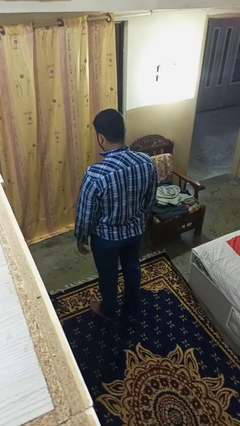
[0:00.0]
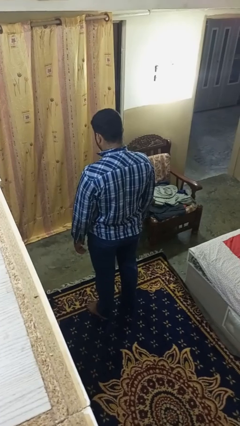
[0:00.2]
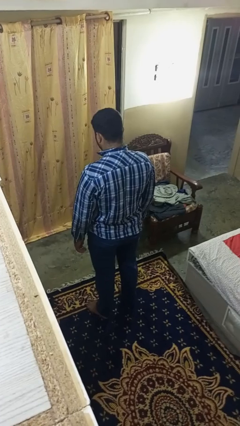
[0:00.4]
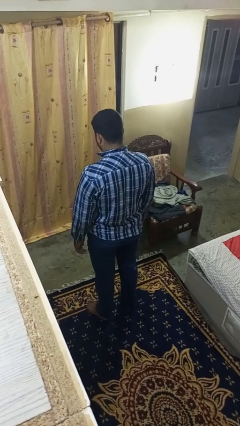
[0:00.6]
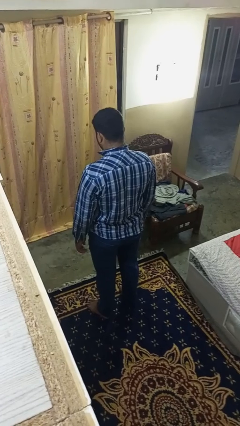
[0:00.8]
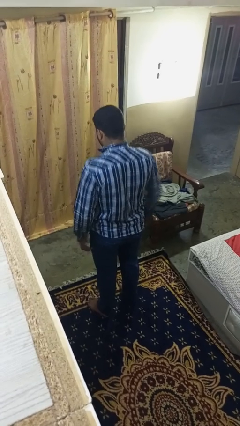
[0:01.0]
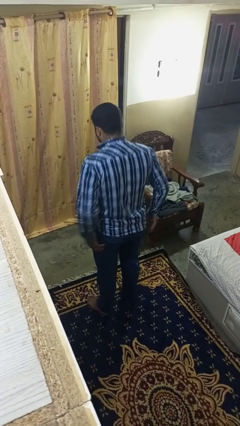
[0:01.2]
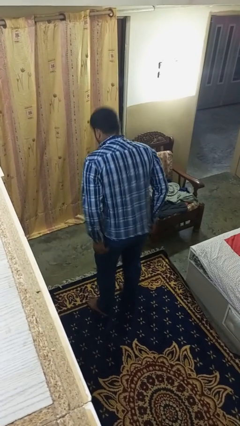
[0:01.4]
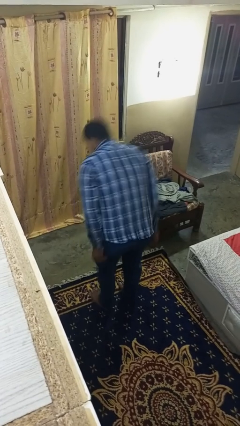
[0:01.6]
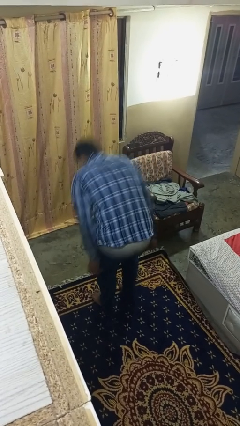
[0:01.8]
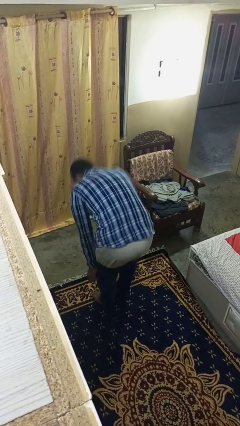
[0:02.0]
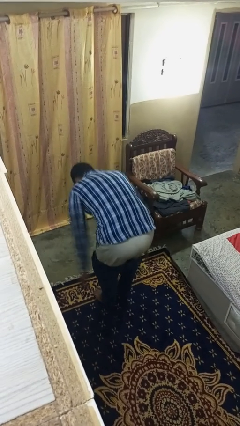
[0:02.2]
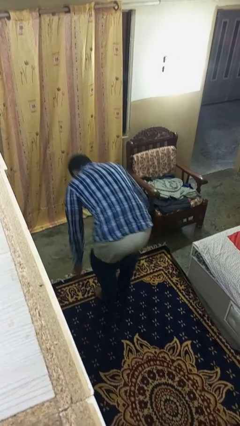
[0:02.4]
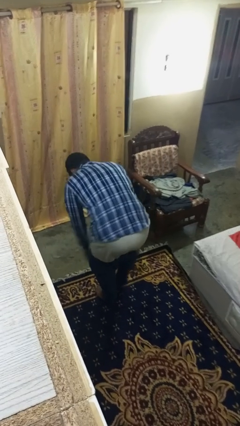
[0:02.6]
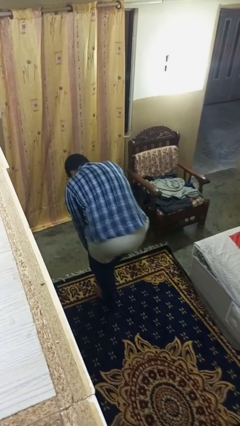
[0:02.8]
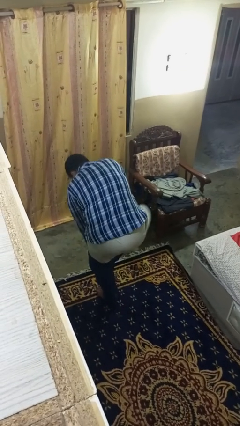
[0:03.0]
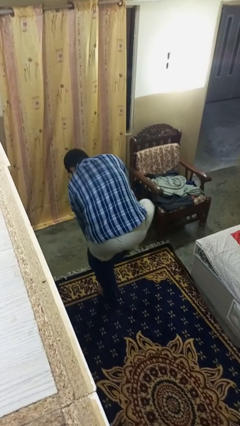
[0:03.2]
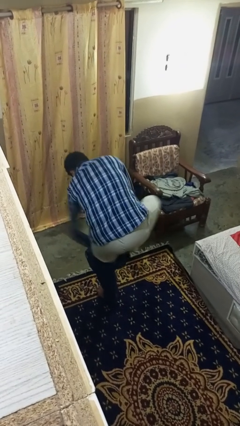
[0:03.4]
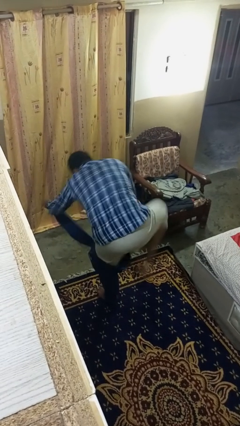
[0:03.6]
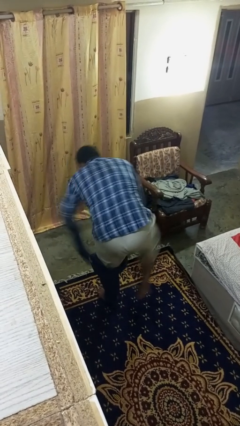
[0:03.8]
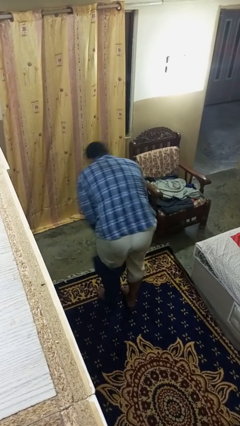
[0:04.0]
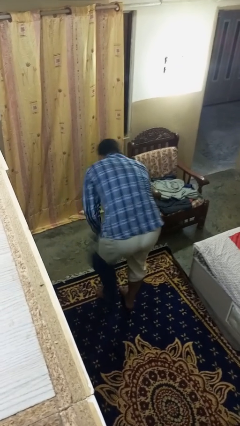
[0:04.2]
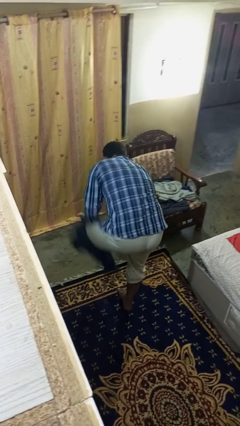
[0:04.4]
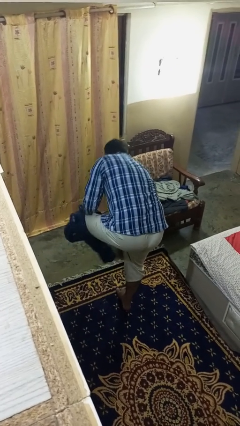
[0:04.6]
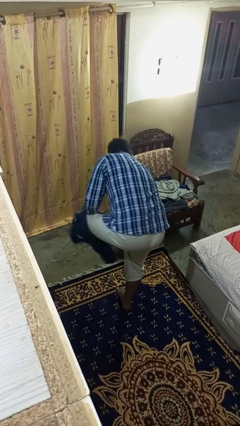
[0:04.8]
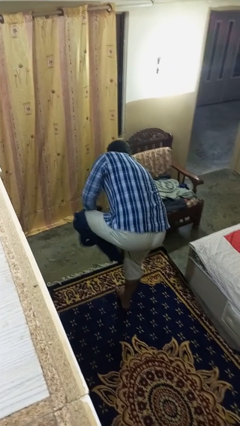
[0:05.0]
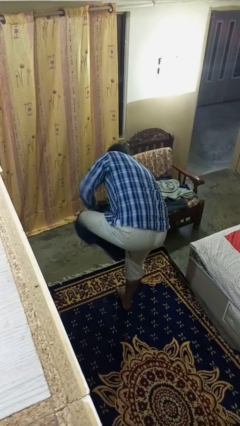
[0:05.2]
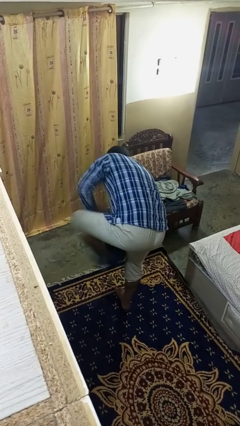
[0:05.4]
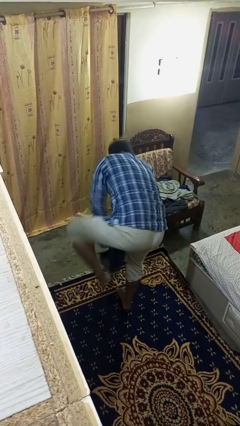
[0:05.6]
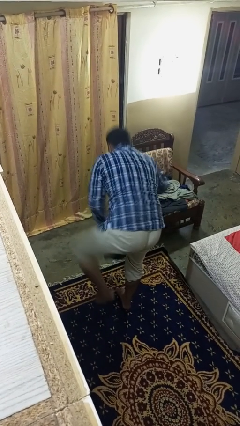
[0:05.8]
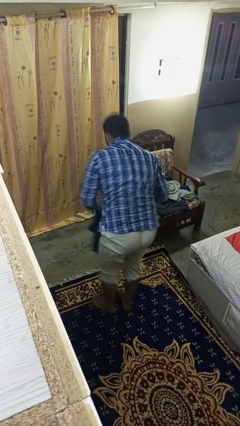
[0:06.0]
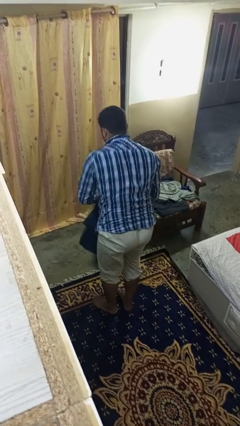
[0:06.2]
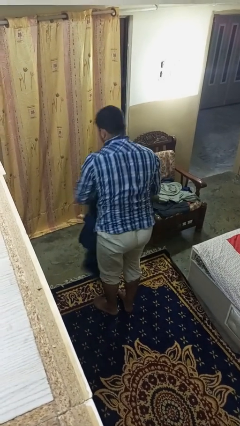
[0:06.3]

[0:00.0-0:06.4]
person takes off pants

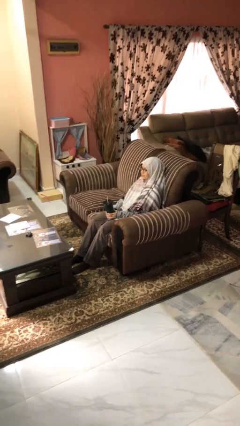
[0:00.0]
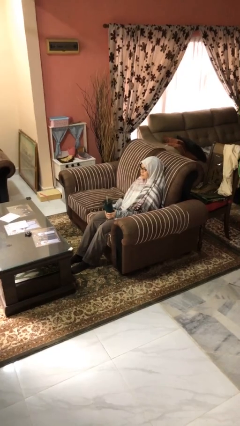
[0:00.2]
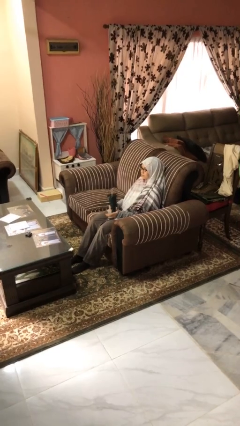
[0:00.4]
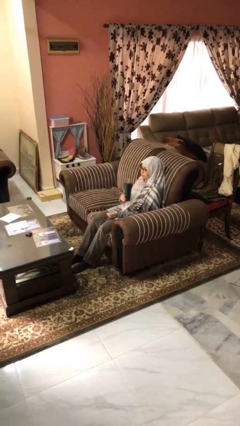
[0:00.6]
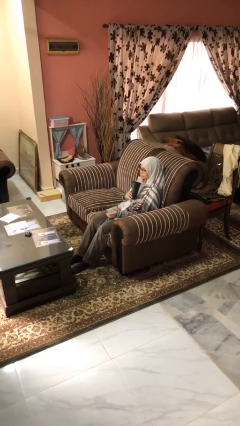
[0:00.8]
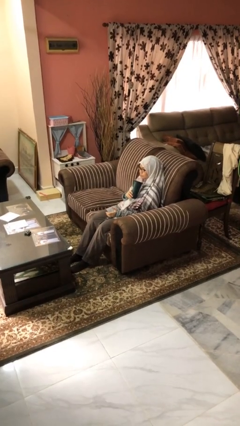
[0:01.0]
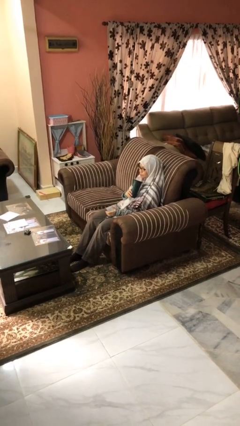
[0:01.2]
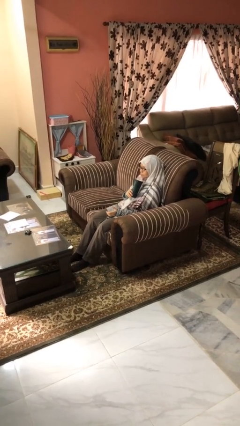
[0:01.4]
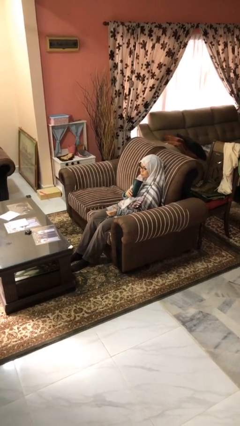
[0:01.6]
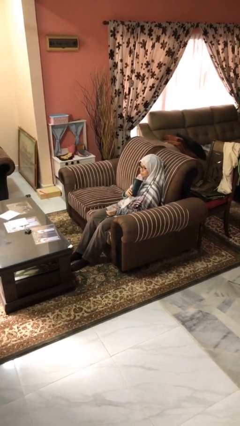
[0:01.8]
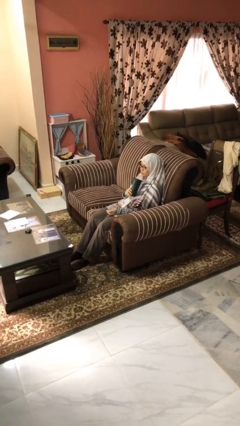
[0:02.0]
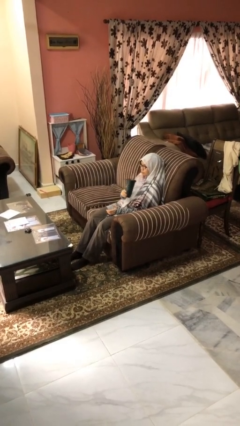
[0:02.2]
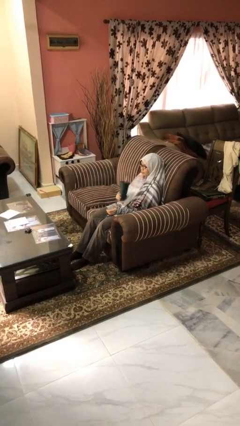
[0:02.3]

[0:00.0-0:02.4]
person drinks from straw

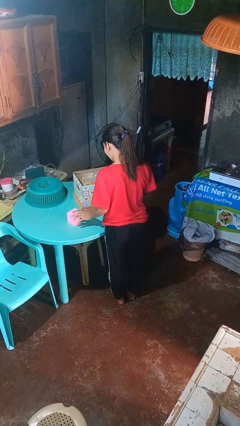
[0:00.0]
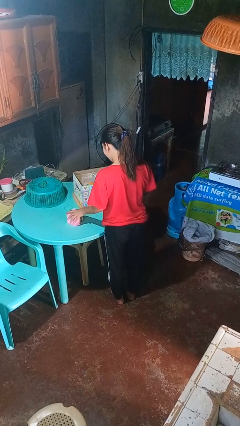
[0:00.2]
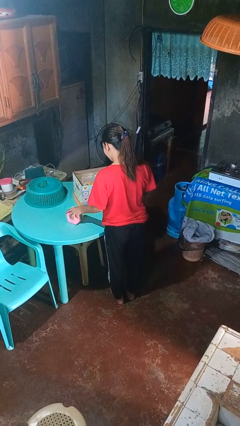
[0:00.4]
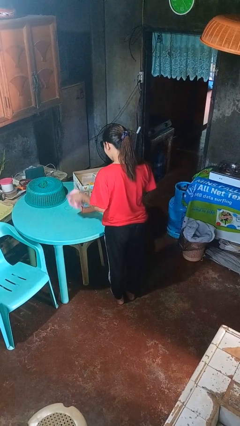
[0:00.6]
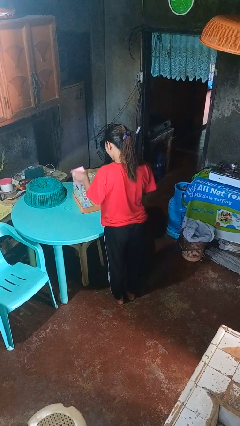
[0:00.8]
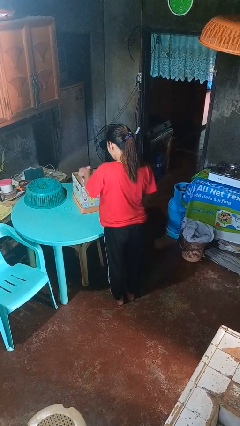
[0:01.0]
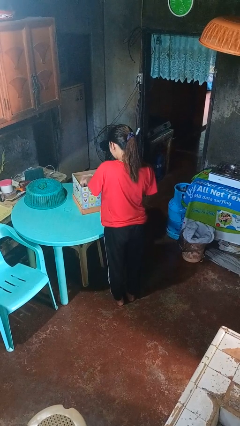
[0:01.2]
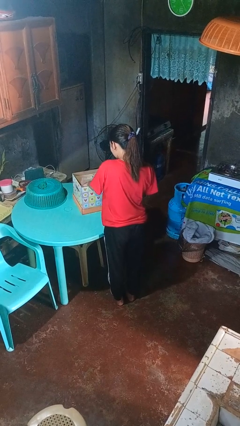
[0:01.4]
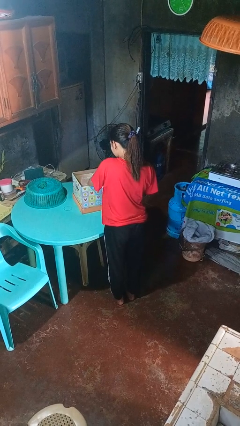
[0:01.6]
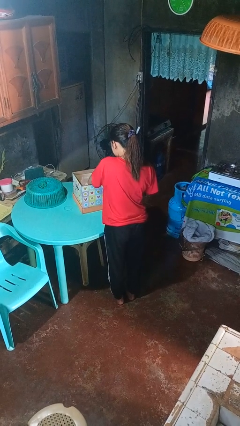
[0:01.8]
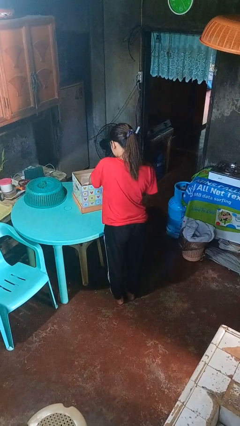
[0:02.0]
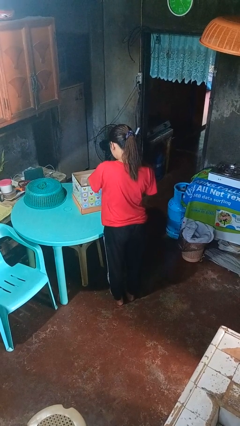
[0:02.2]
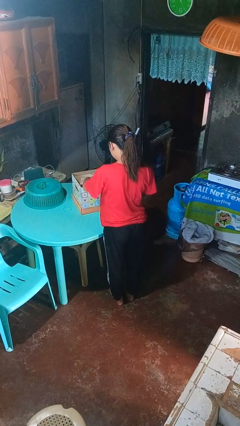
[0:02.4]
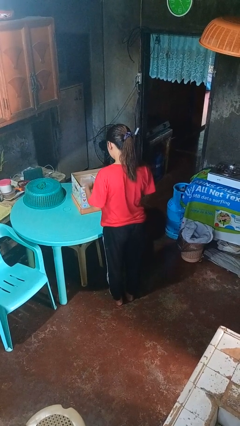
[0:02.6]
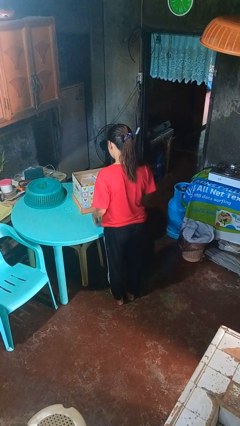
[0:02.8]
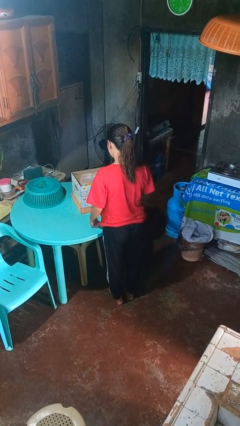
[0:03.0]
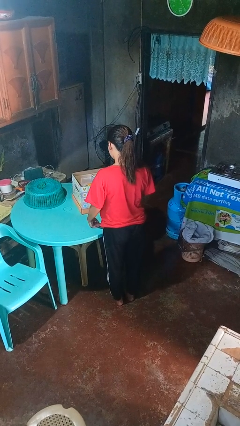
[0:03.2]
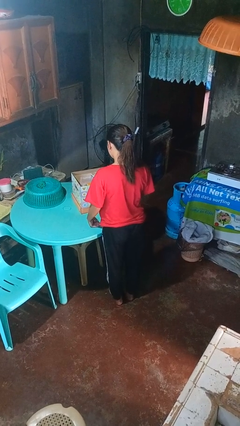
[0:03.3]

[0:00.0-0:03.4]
person puts object into box

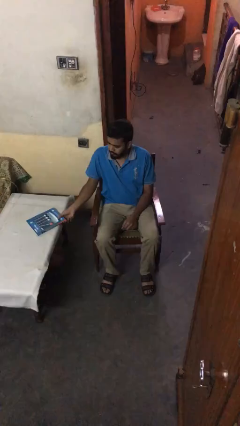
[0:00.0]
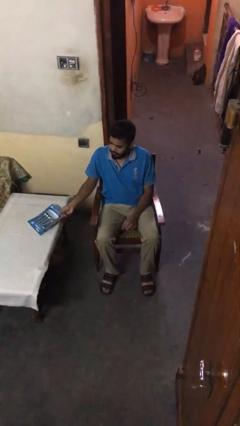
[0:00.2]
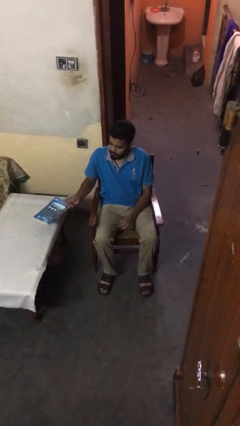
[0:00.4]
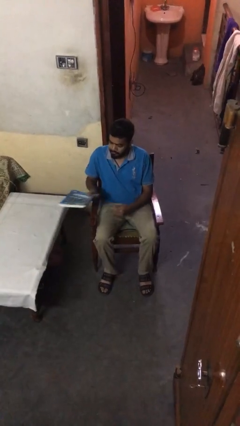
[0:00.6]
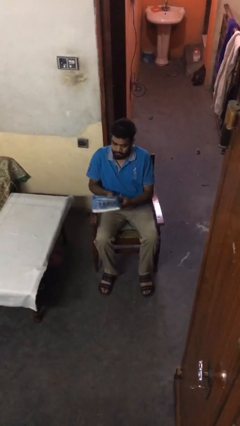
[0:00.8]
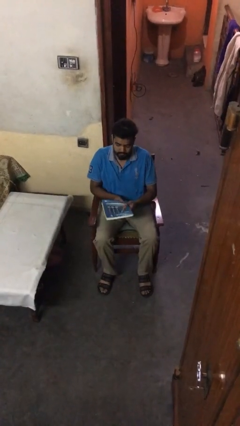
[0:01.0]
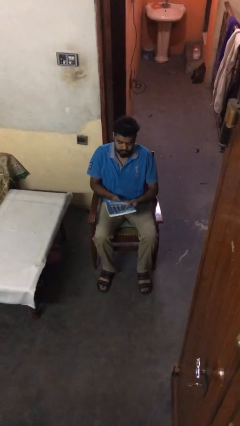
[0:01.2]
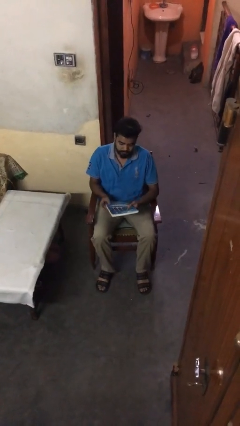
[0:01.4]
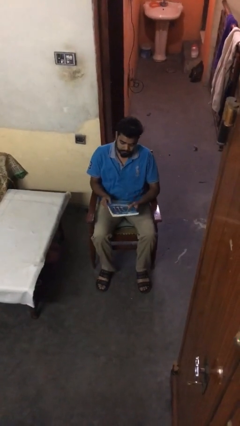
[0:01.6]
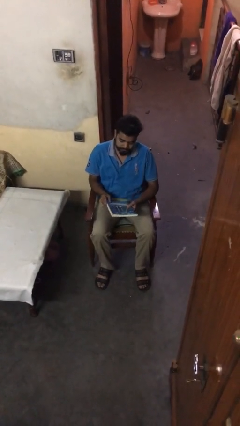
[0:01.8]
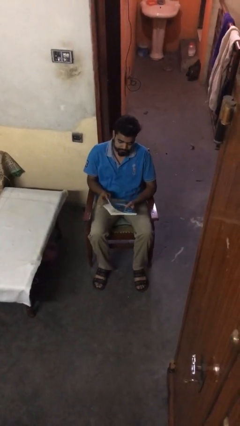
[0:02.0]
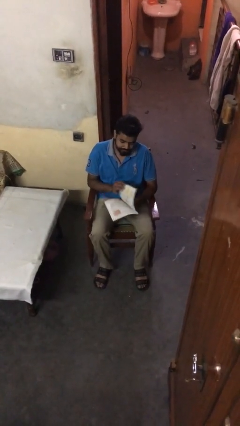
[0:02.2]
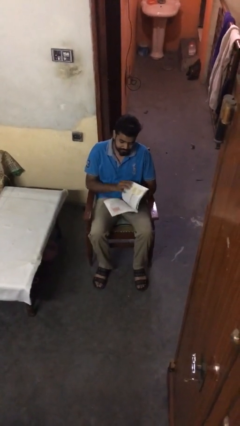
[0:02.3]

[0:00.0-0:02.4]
person picks up object from table

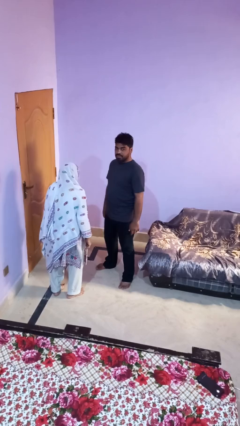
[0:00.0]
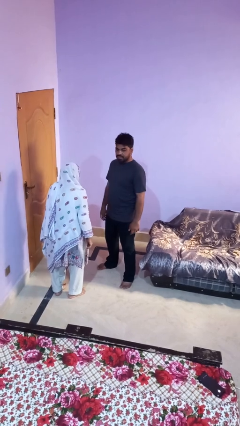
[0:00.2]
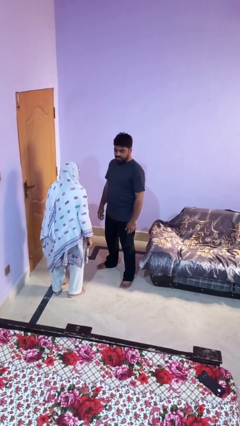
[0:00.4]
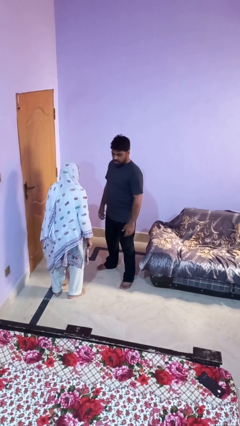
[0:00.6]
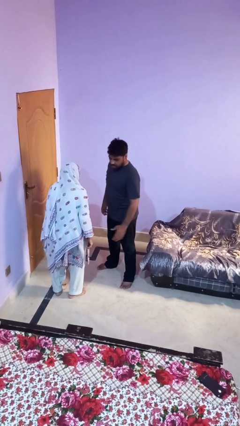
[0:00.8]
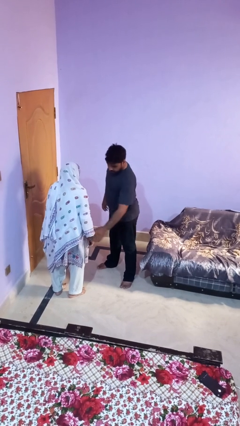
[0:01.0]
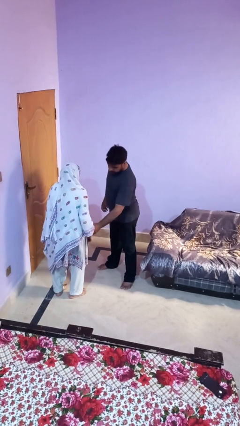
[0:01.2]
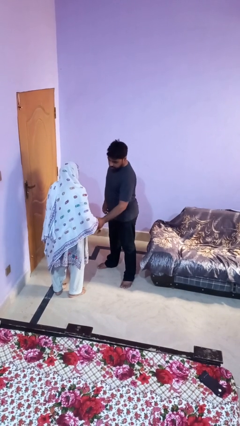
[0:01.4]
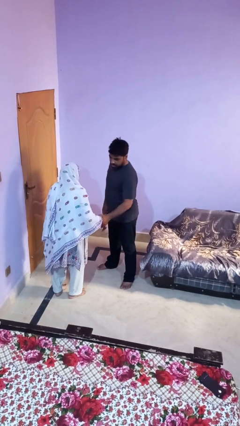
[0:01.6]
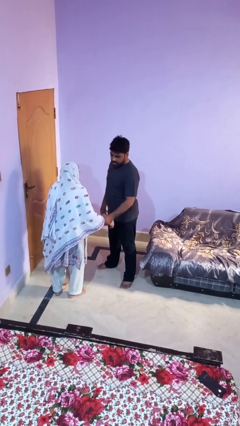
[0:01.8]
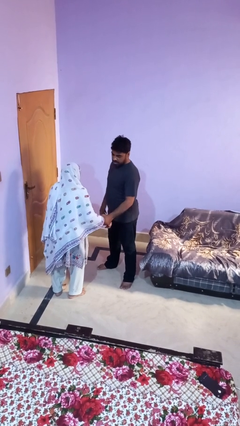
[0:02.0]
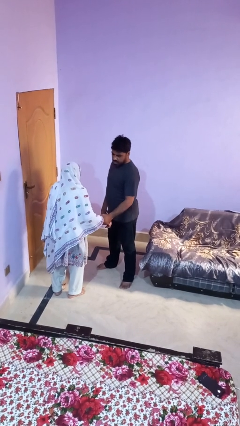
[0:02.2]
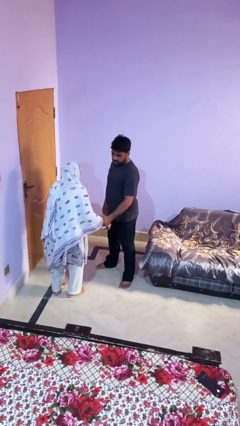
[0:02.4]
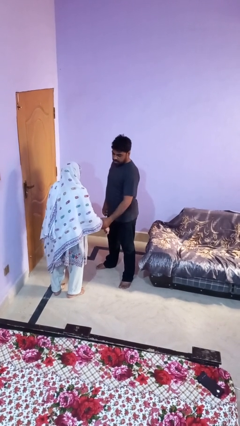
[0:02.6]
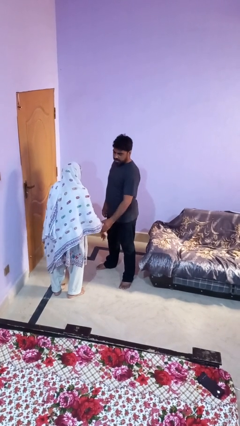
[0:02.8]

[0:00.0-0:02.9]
person grabs person by forearm

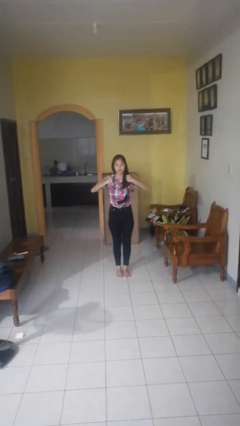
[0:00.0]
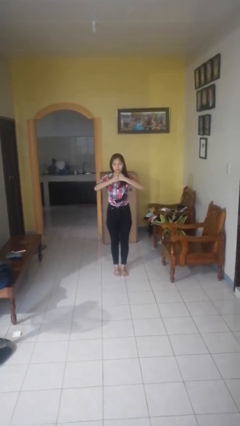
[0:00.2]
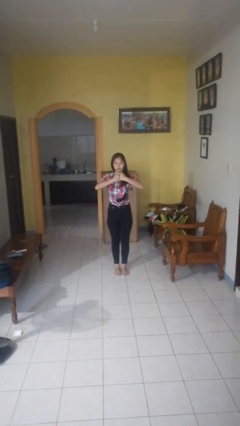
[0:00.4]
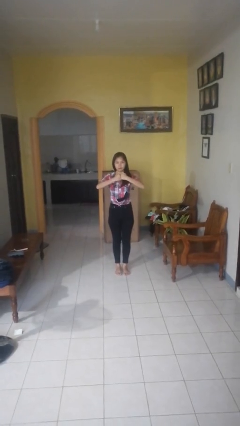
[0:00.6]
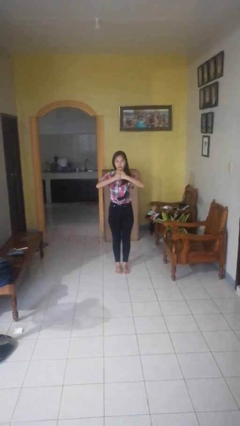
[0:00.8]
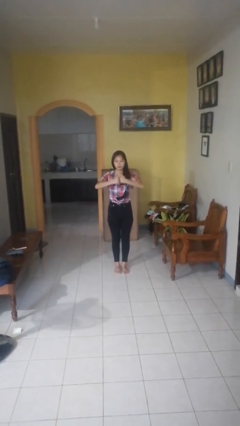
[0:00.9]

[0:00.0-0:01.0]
person gestures zoom out
